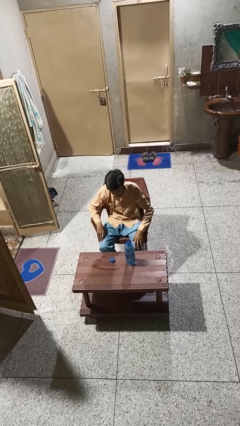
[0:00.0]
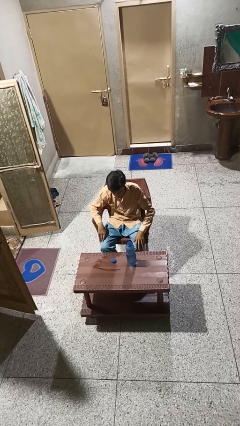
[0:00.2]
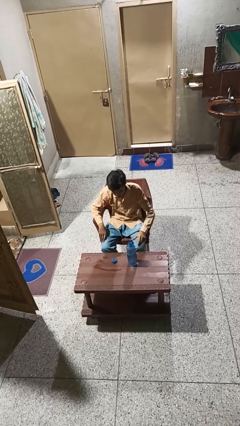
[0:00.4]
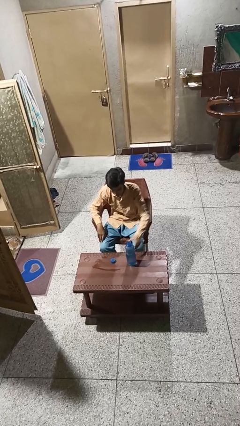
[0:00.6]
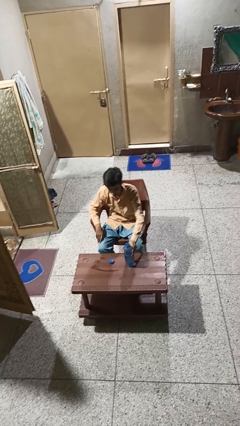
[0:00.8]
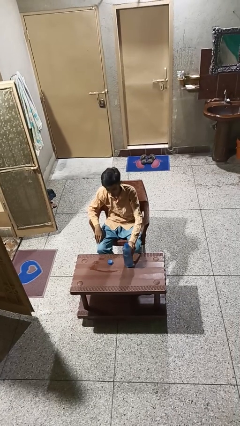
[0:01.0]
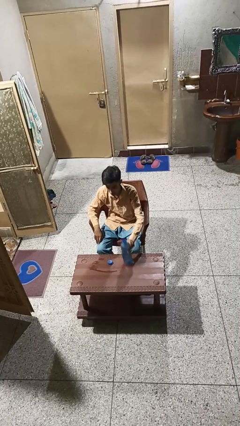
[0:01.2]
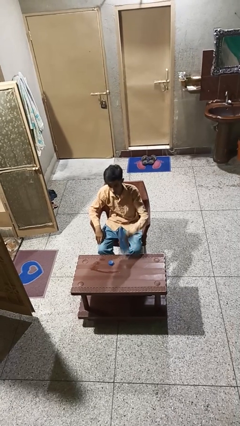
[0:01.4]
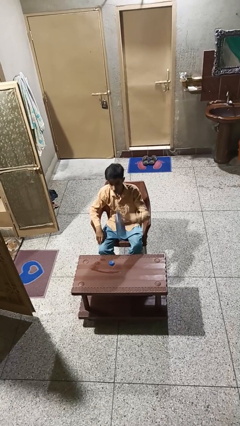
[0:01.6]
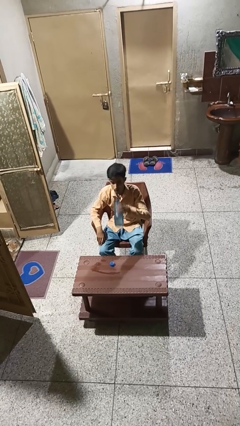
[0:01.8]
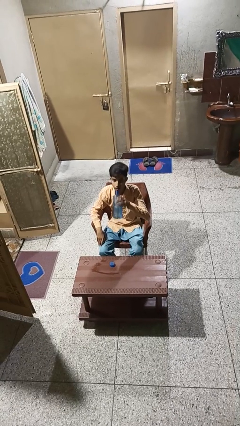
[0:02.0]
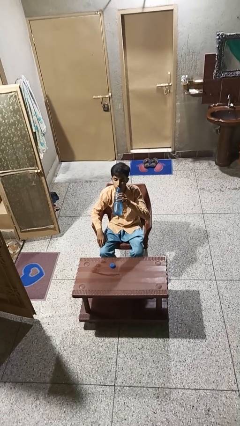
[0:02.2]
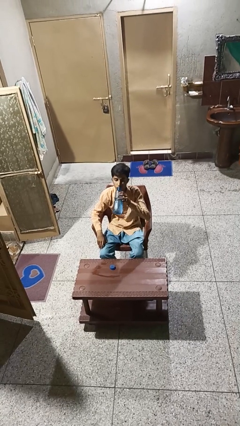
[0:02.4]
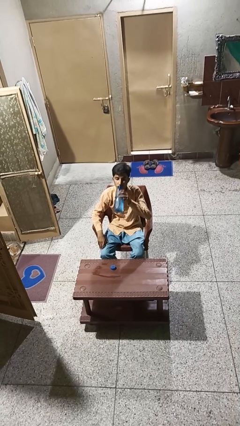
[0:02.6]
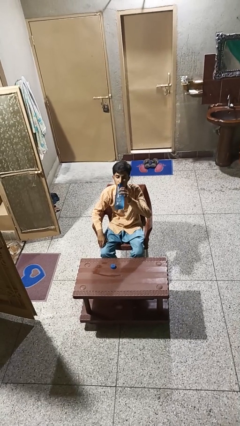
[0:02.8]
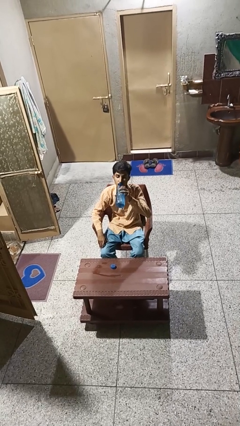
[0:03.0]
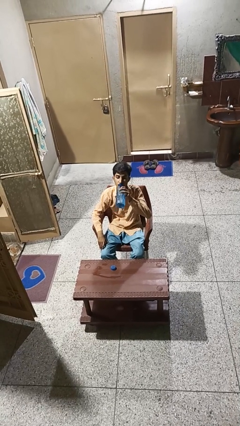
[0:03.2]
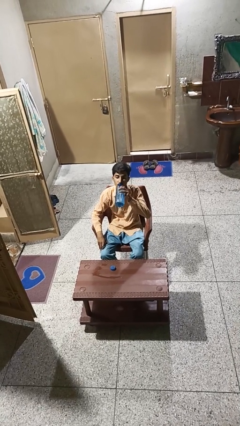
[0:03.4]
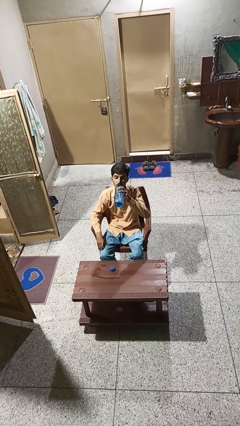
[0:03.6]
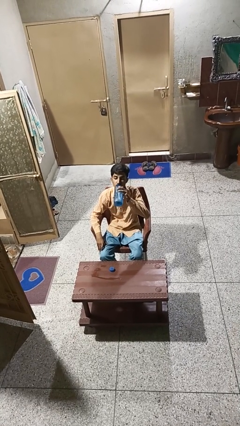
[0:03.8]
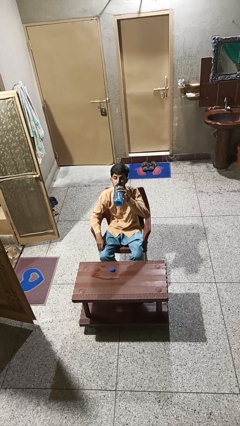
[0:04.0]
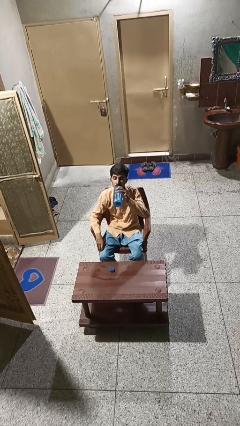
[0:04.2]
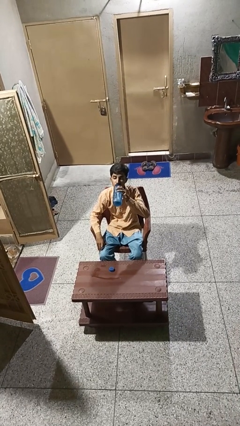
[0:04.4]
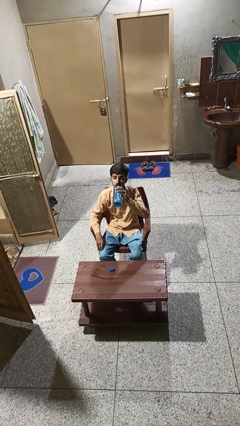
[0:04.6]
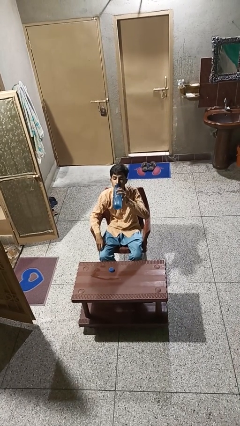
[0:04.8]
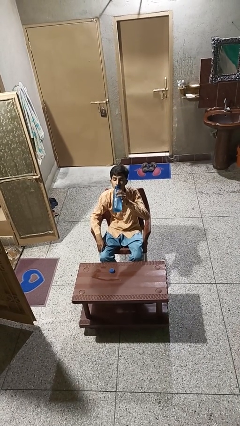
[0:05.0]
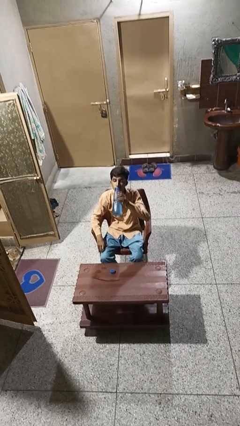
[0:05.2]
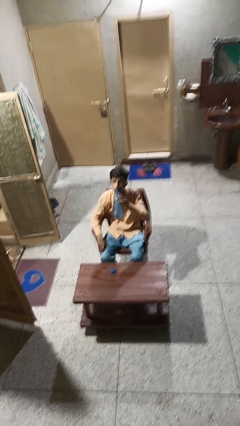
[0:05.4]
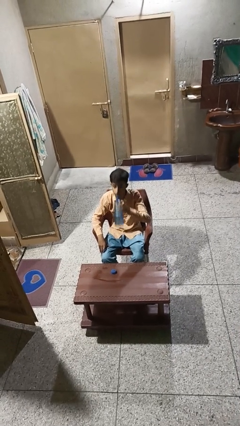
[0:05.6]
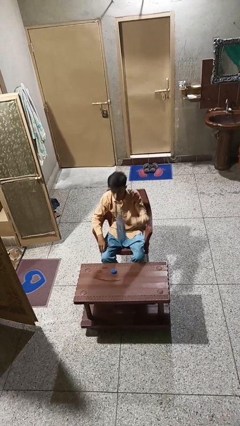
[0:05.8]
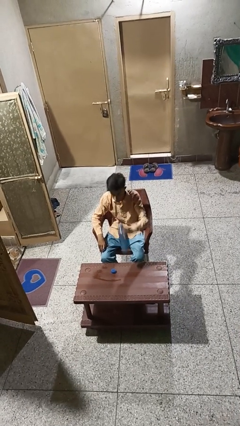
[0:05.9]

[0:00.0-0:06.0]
person drinks from bottle

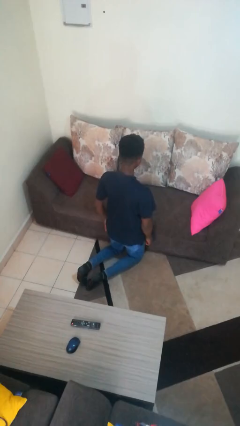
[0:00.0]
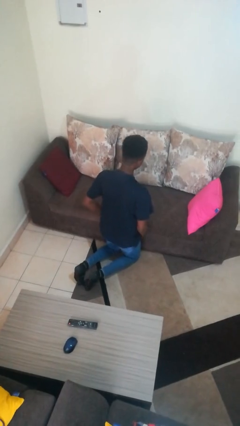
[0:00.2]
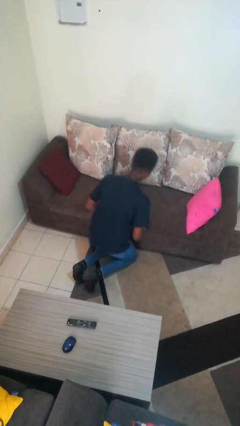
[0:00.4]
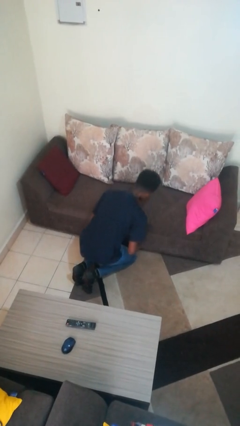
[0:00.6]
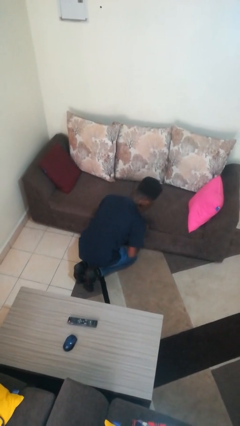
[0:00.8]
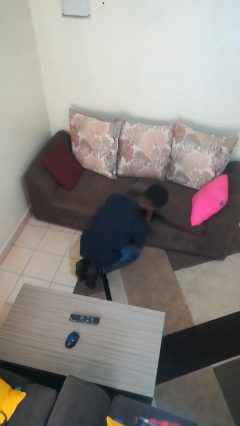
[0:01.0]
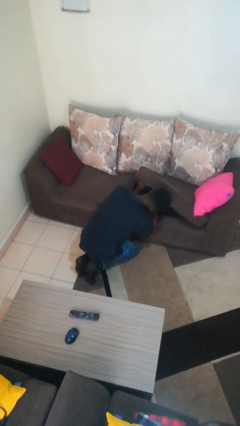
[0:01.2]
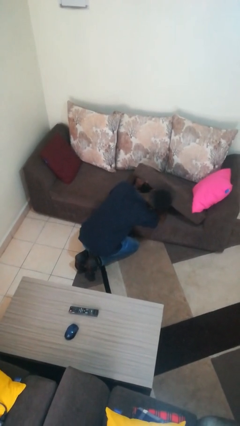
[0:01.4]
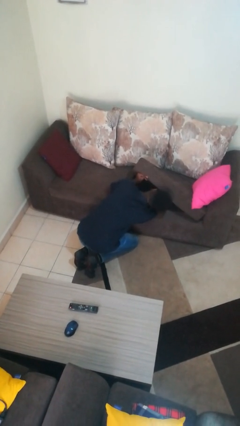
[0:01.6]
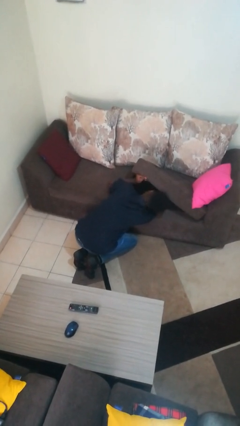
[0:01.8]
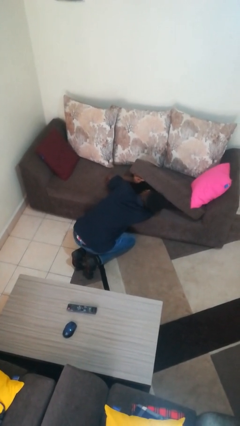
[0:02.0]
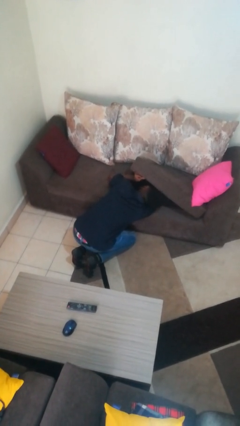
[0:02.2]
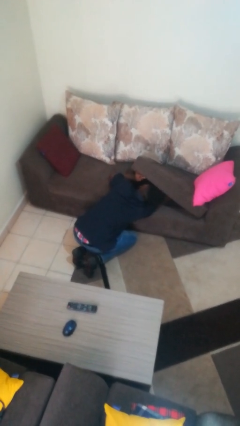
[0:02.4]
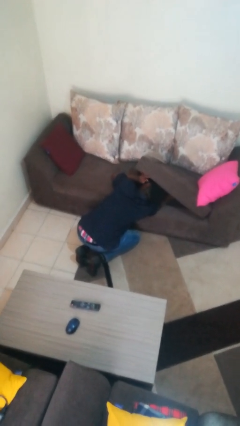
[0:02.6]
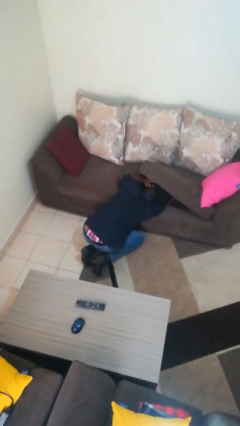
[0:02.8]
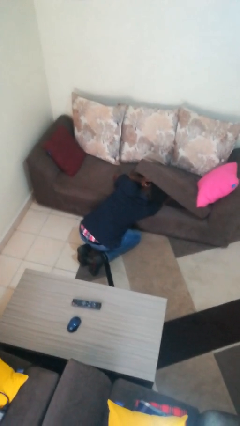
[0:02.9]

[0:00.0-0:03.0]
person searches under couch

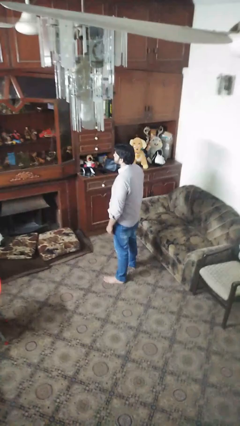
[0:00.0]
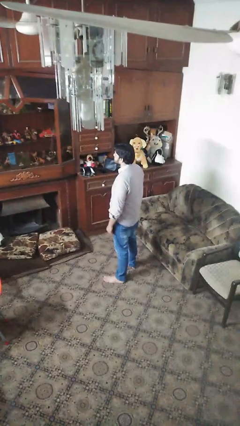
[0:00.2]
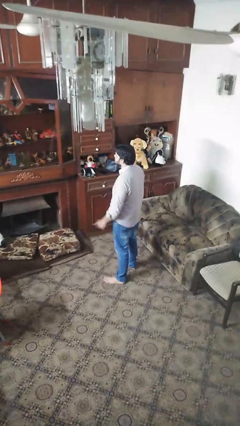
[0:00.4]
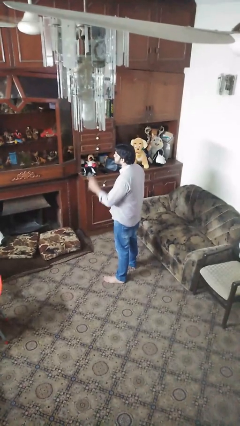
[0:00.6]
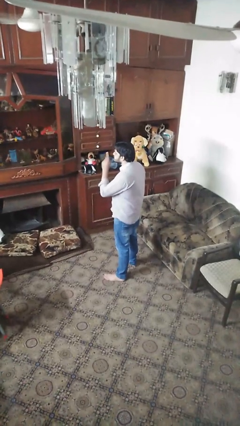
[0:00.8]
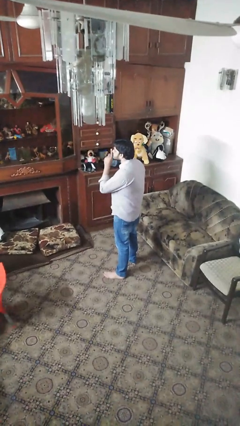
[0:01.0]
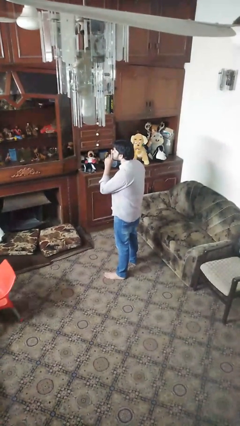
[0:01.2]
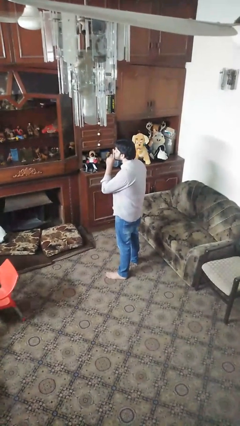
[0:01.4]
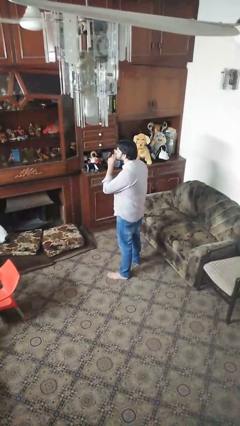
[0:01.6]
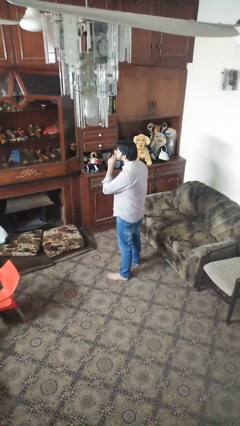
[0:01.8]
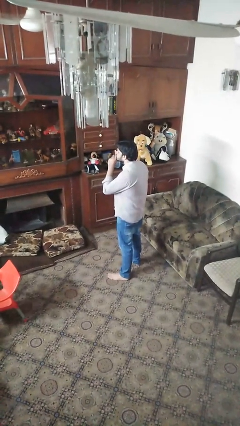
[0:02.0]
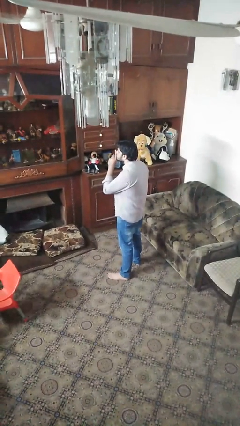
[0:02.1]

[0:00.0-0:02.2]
person gestures be quiet

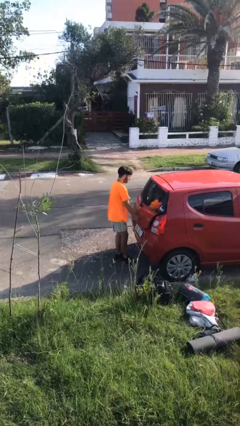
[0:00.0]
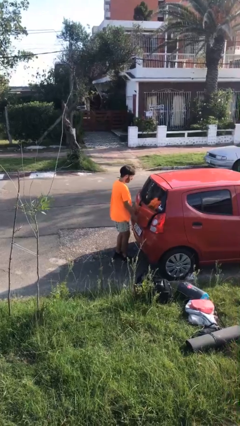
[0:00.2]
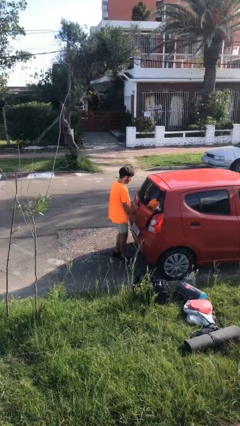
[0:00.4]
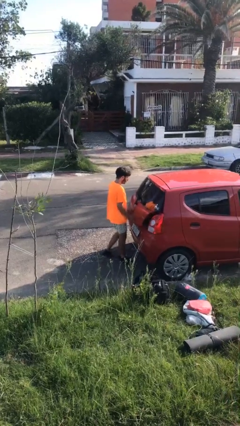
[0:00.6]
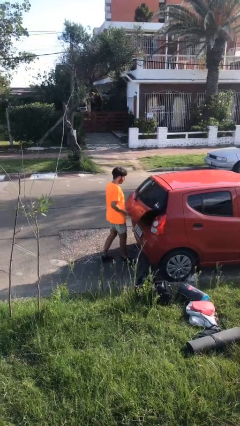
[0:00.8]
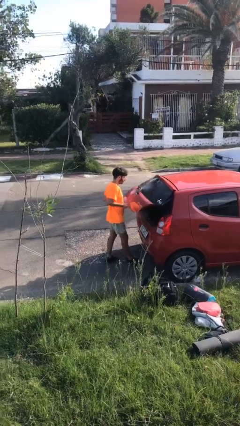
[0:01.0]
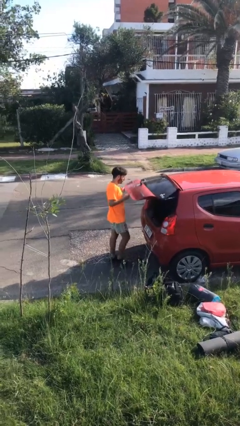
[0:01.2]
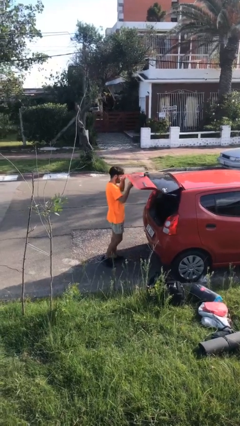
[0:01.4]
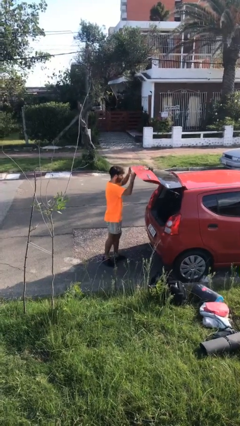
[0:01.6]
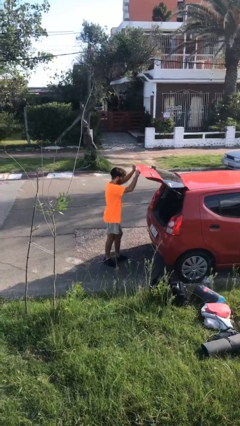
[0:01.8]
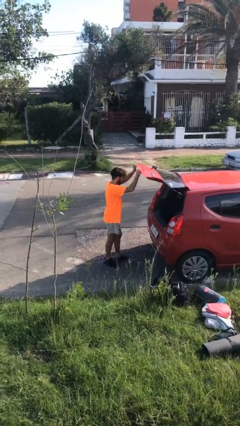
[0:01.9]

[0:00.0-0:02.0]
person opens car trunk

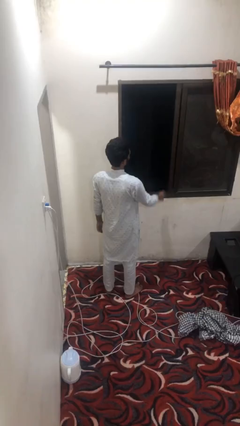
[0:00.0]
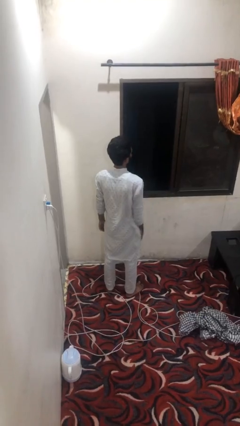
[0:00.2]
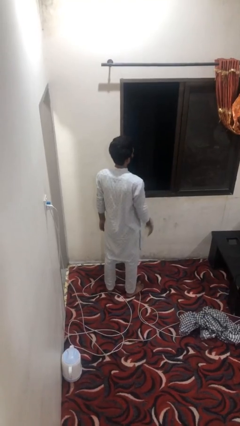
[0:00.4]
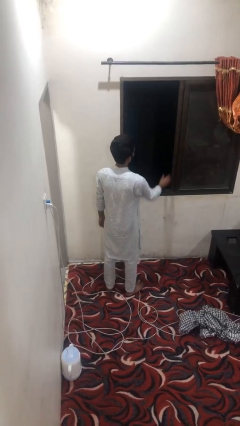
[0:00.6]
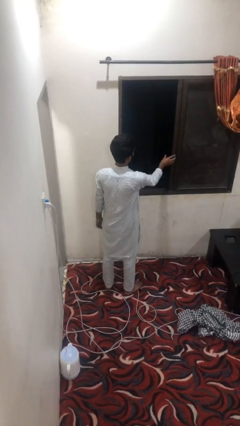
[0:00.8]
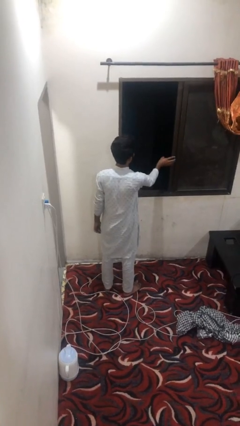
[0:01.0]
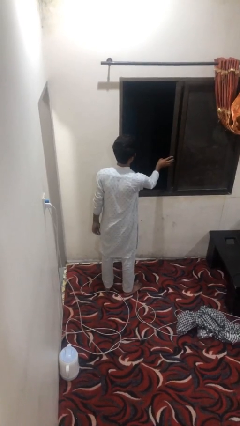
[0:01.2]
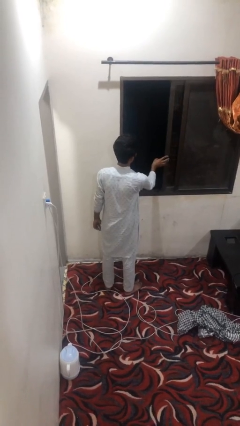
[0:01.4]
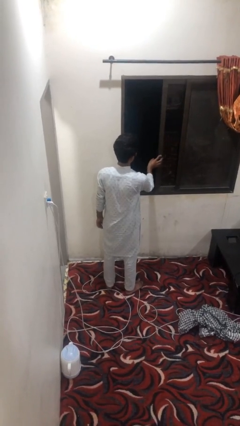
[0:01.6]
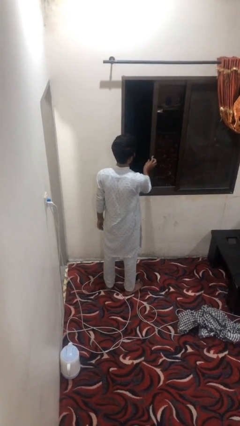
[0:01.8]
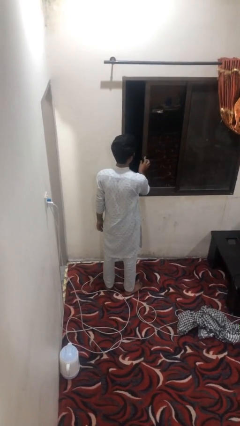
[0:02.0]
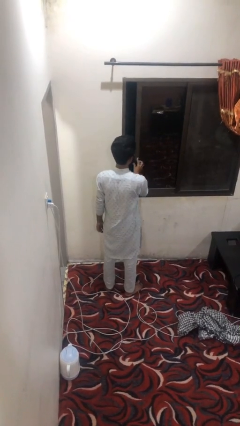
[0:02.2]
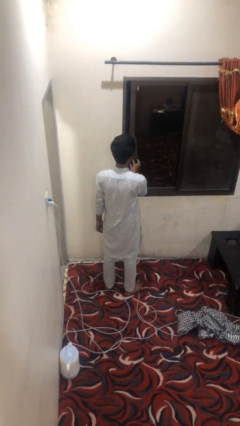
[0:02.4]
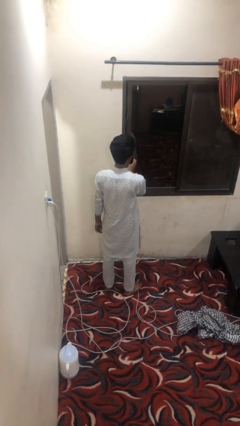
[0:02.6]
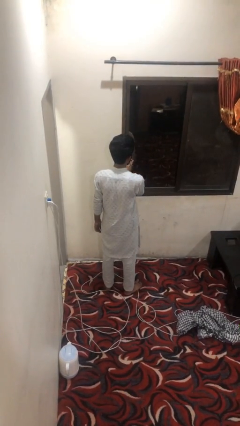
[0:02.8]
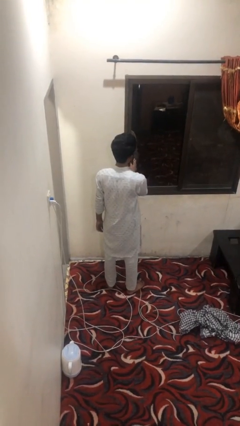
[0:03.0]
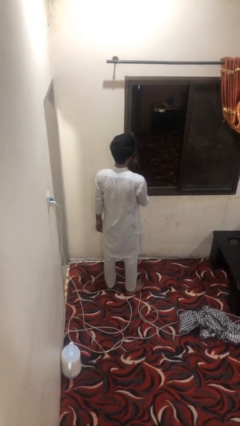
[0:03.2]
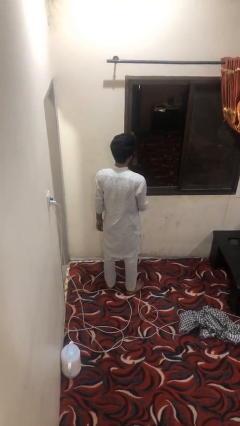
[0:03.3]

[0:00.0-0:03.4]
person closes home window

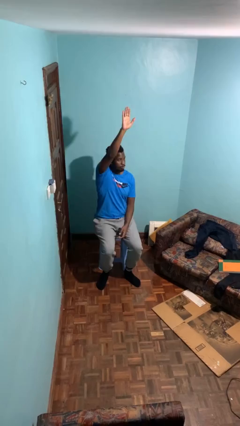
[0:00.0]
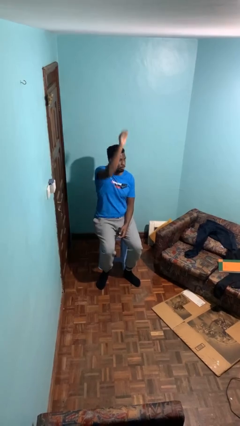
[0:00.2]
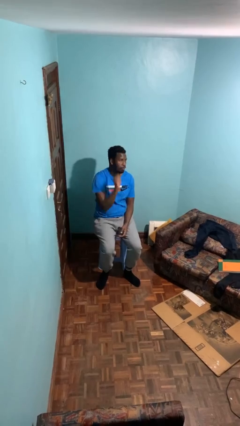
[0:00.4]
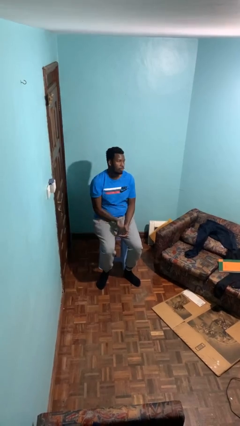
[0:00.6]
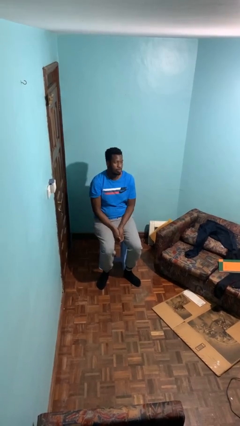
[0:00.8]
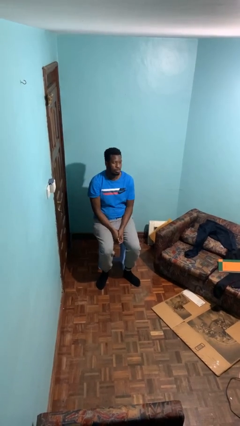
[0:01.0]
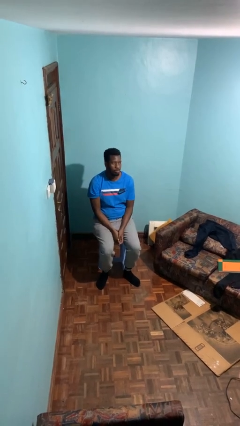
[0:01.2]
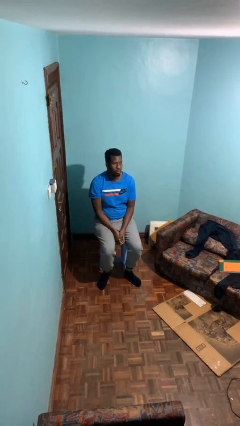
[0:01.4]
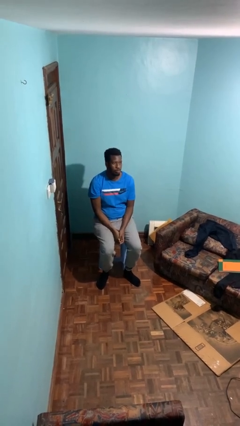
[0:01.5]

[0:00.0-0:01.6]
person gestures lower hand
